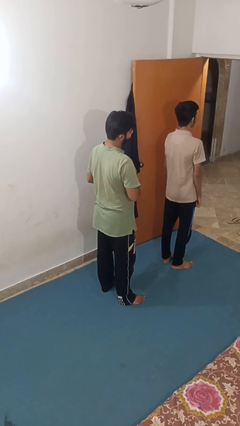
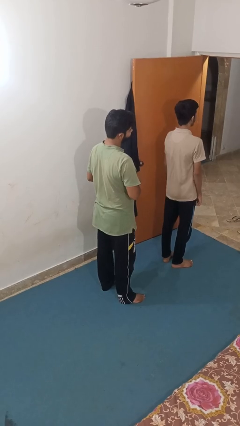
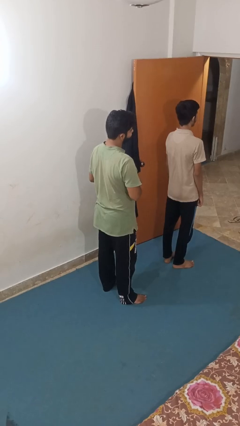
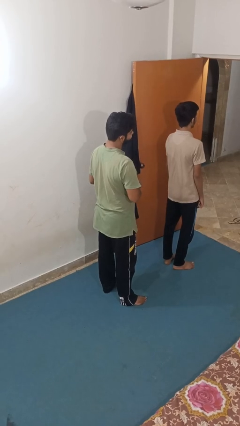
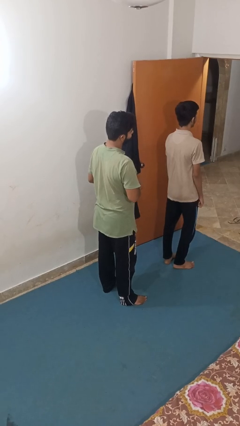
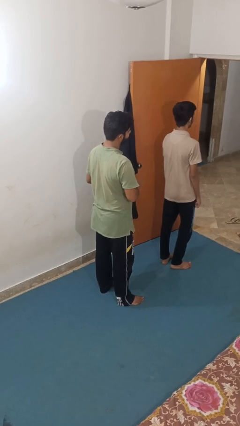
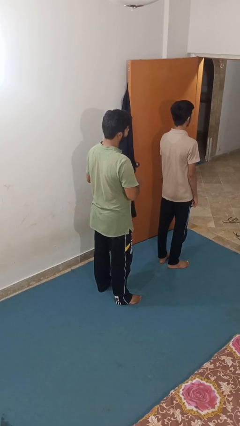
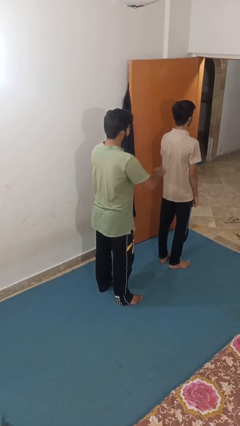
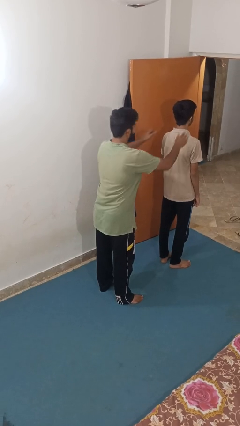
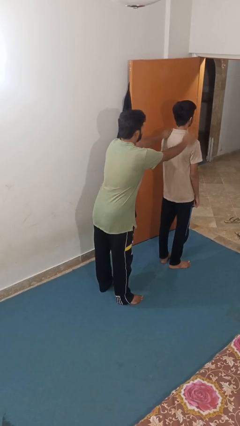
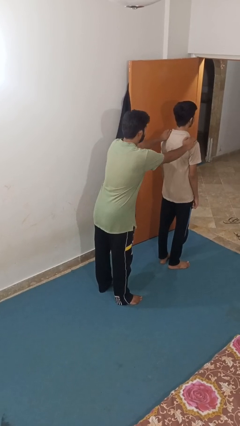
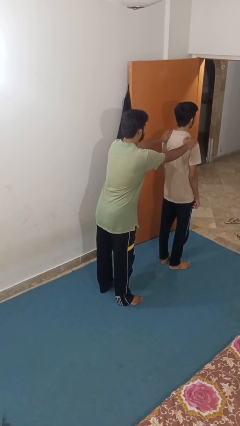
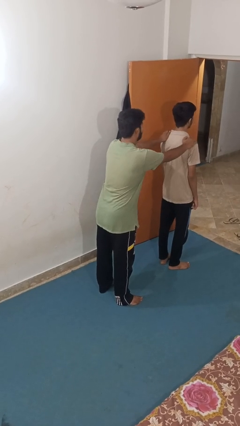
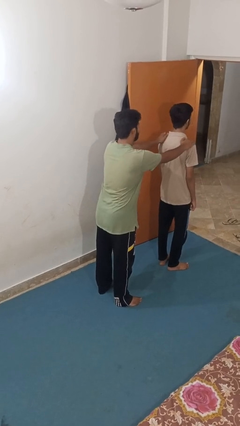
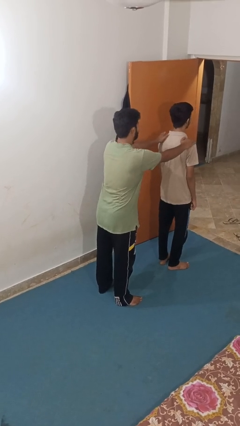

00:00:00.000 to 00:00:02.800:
person grabs person by shoulder

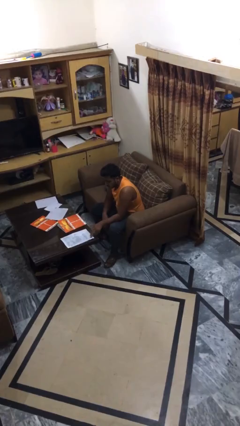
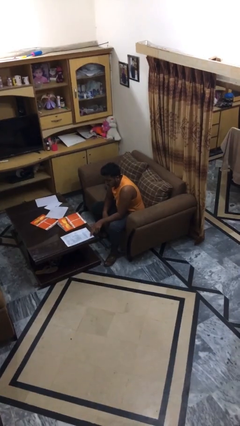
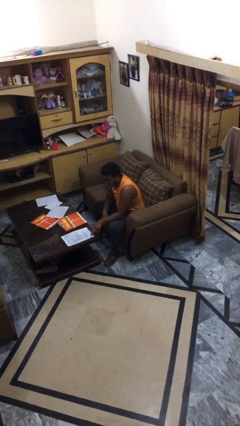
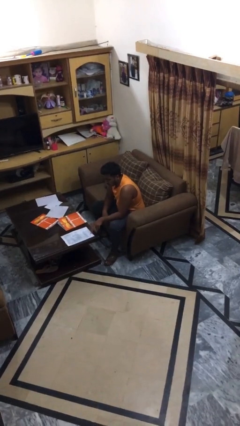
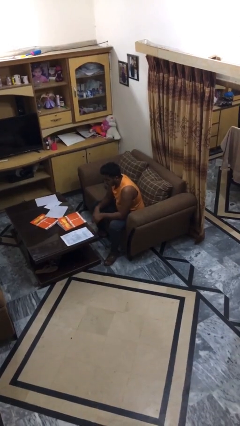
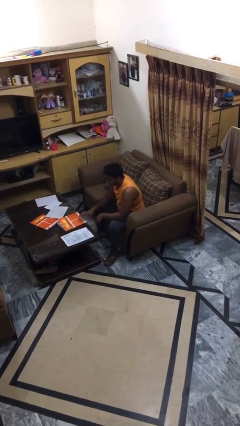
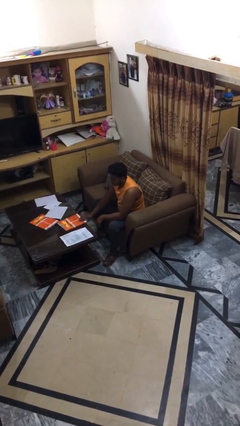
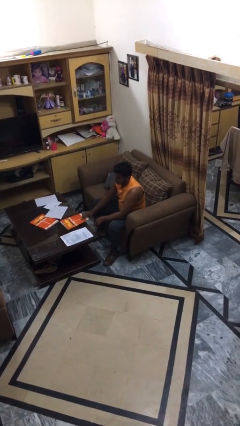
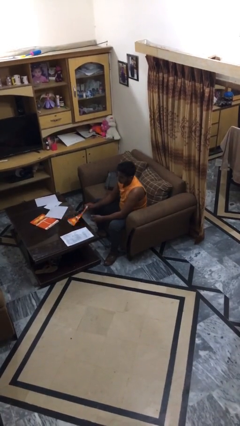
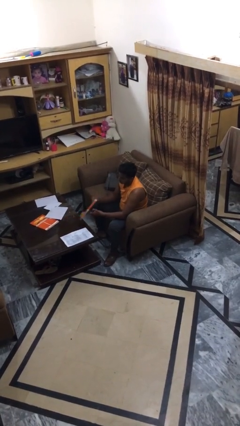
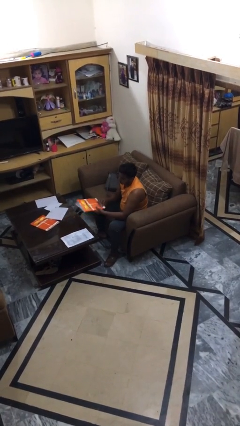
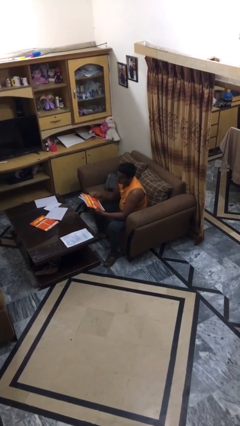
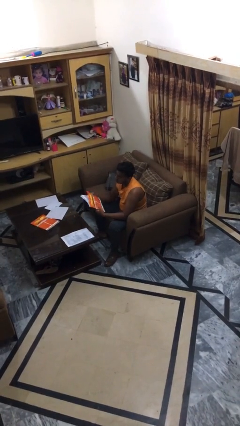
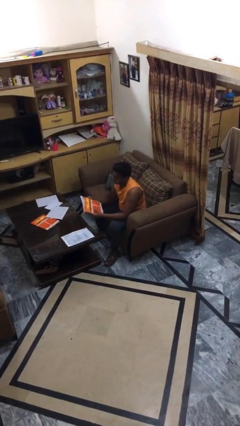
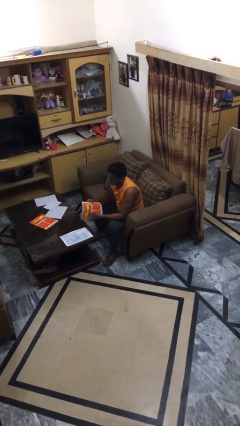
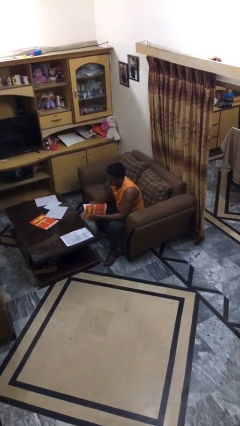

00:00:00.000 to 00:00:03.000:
person picks up object from table

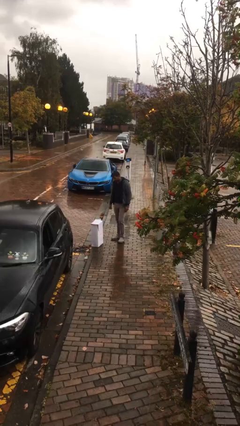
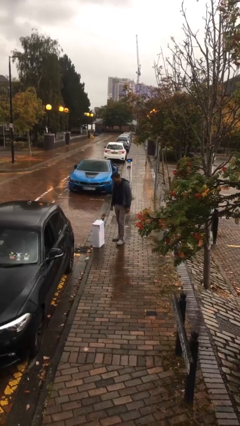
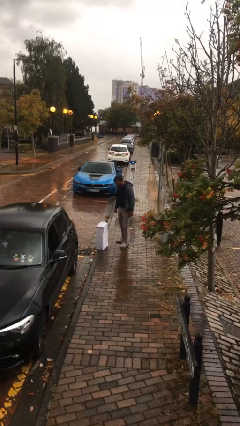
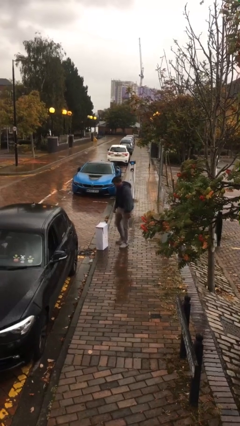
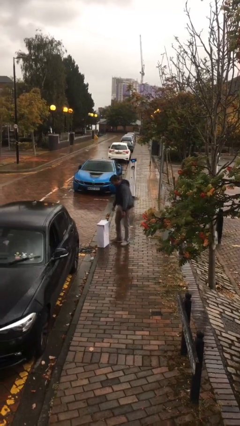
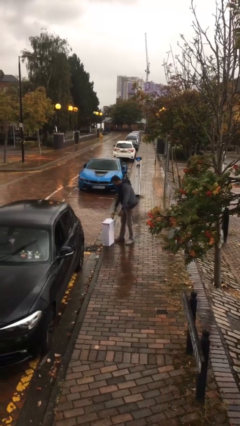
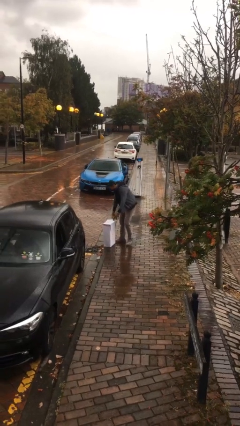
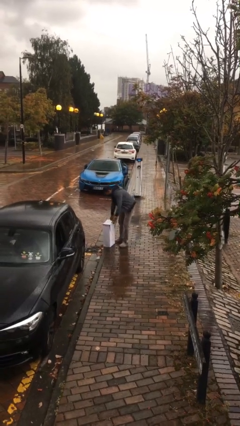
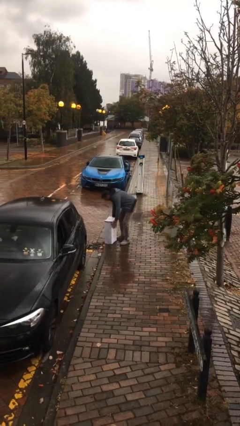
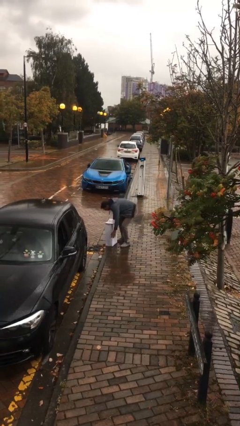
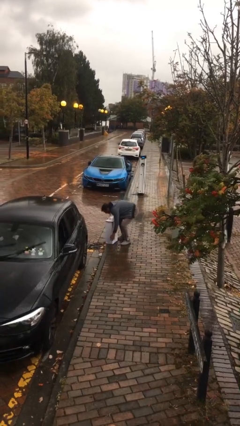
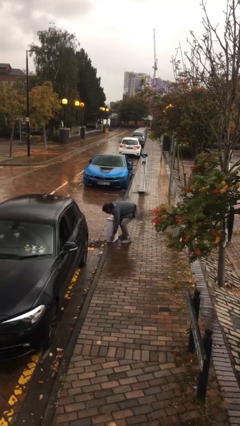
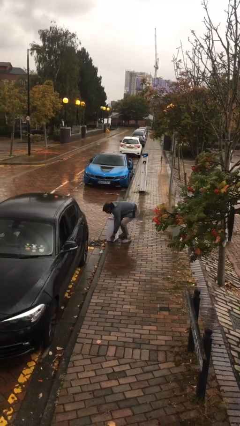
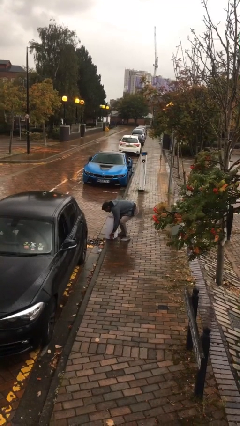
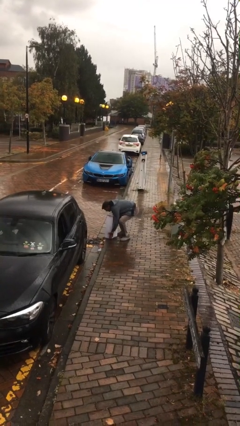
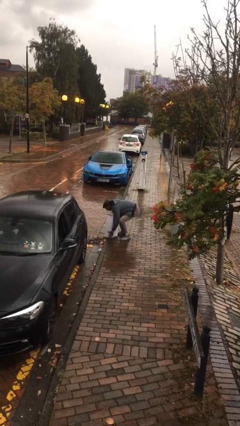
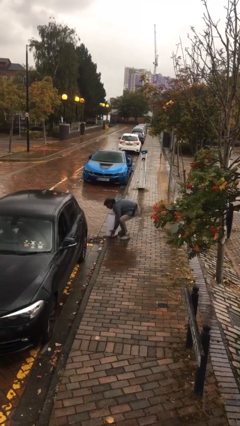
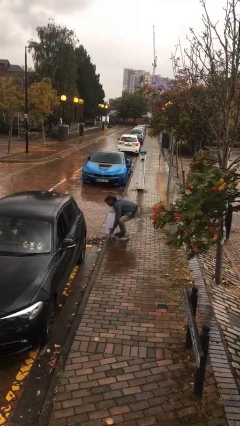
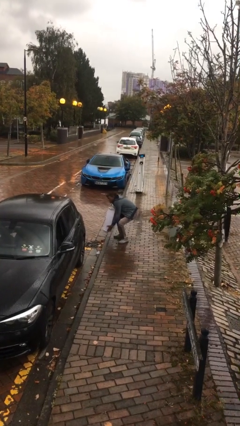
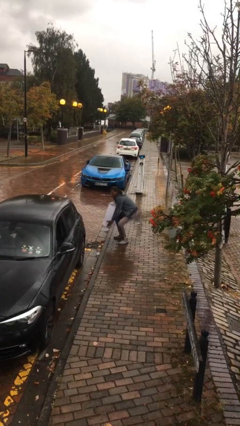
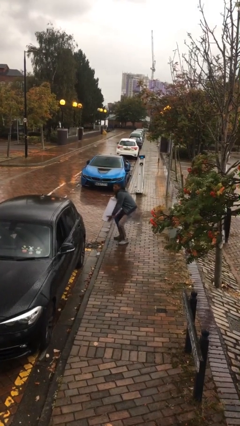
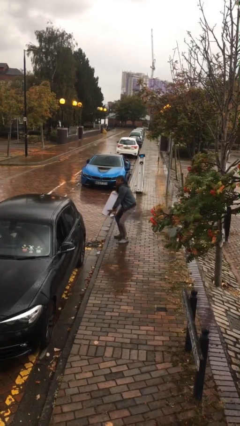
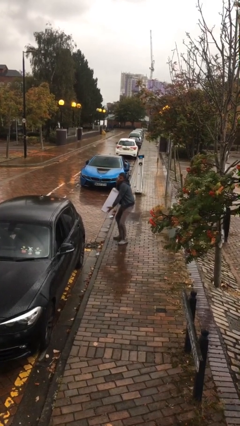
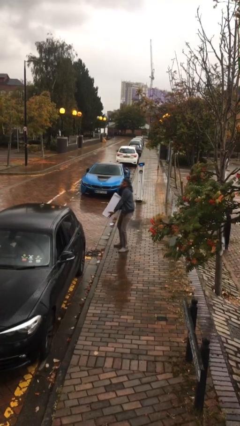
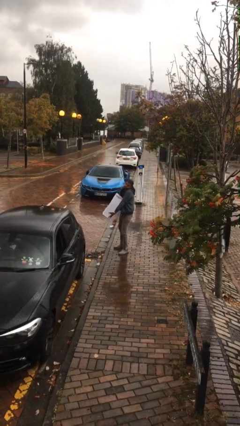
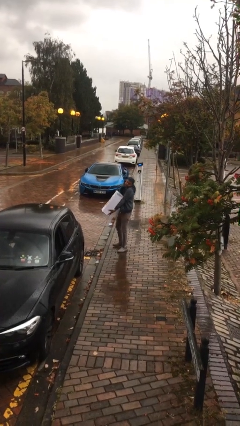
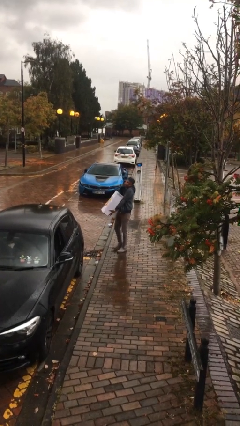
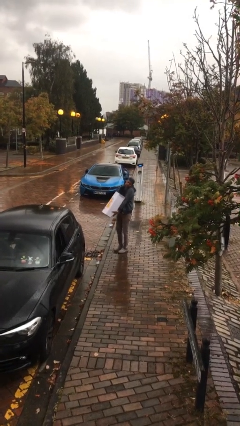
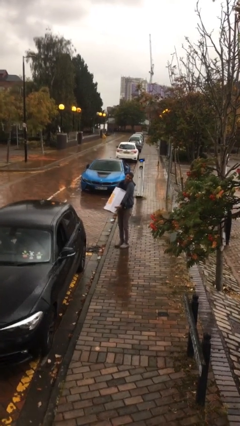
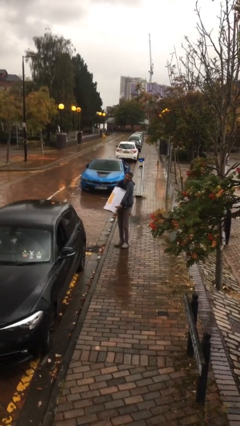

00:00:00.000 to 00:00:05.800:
person picks up object from floor

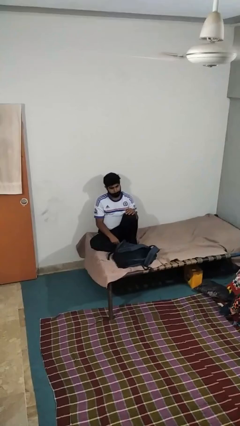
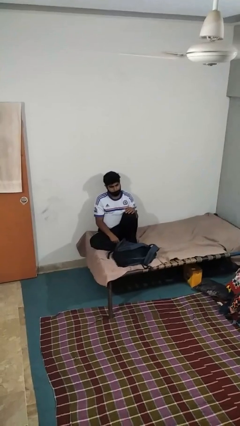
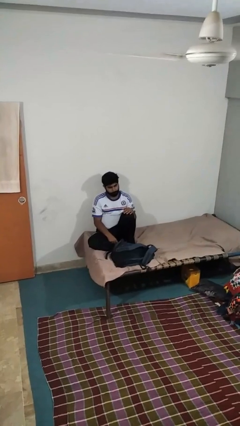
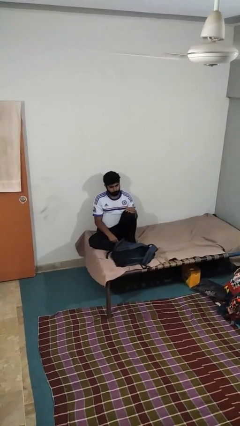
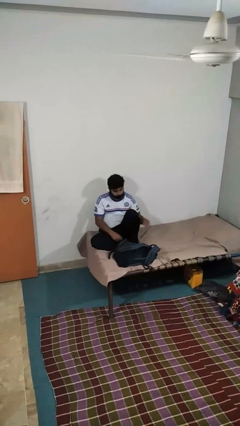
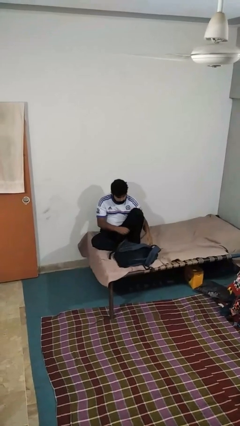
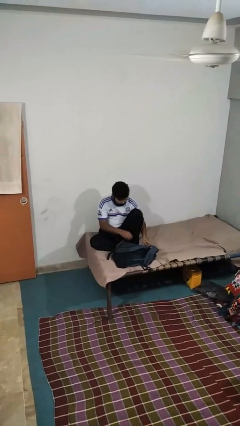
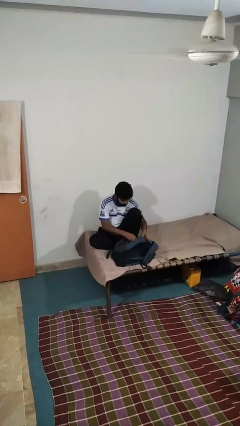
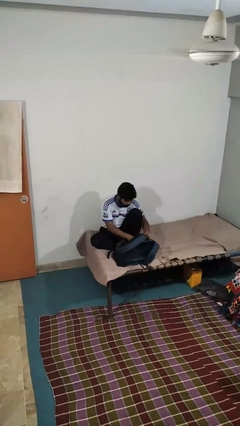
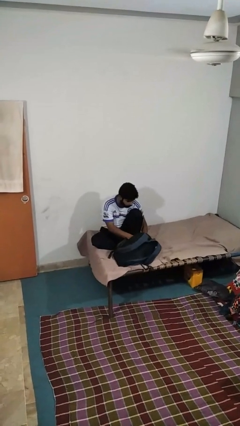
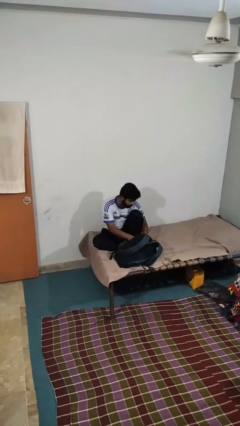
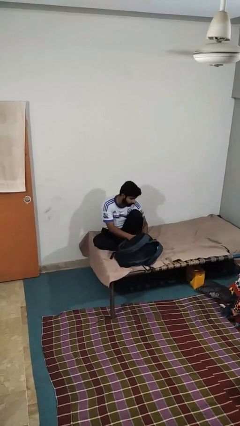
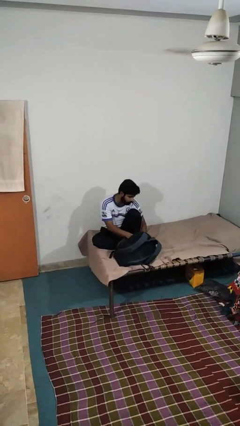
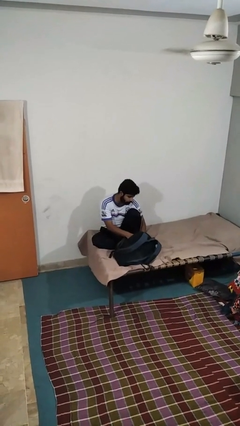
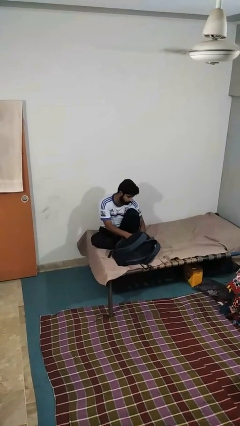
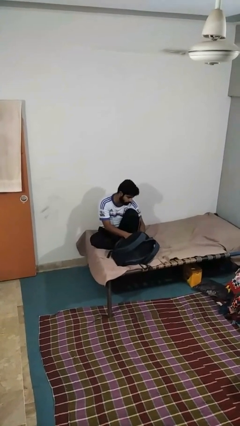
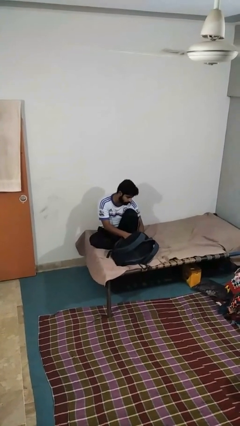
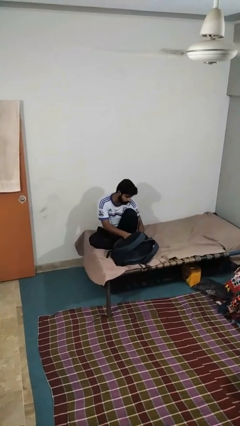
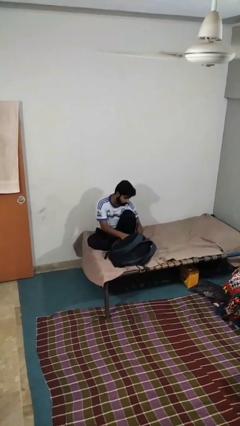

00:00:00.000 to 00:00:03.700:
person searches in backpack

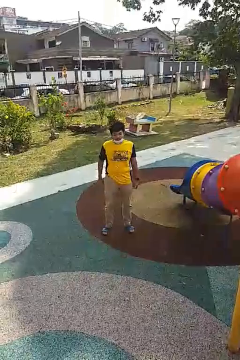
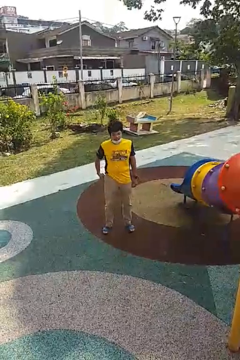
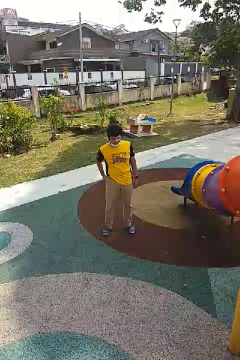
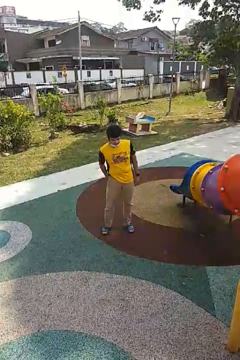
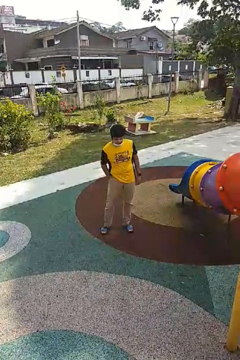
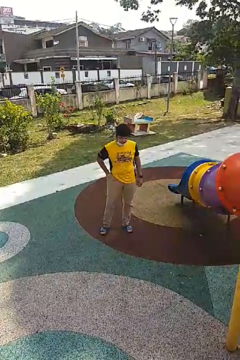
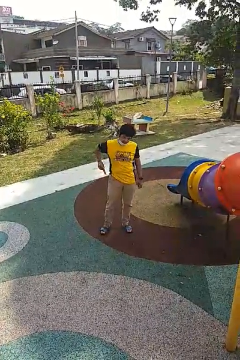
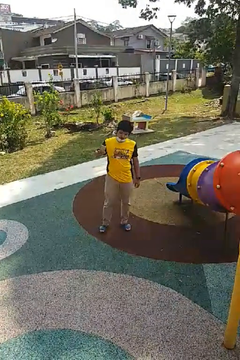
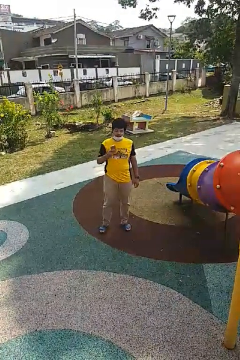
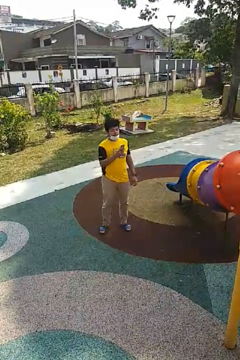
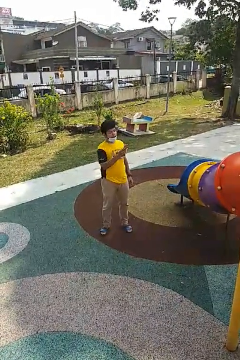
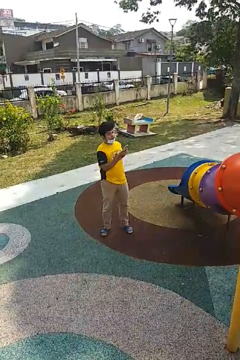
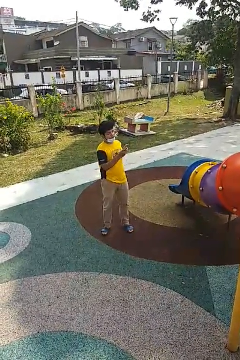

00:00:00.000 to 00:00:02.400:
person takes phone from pocket

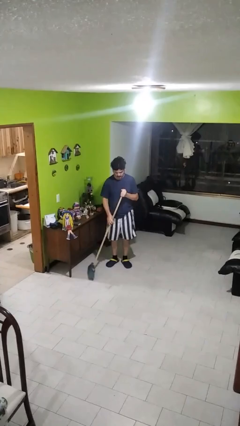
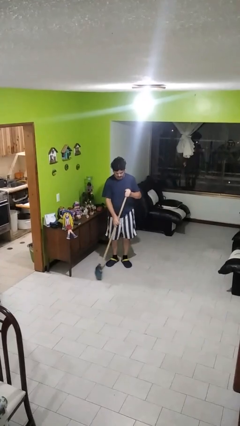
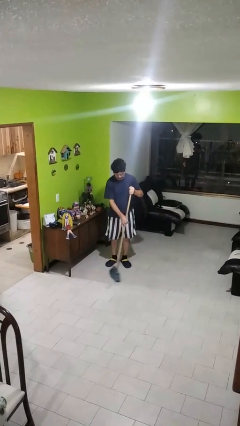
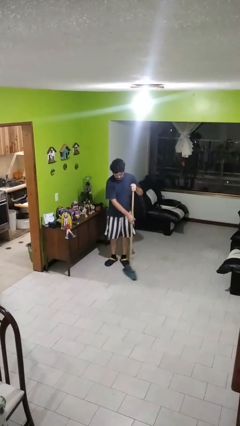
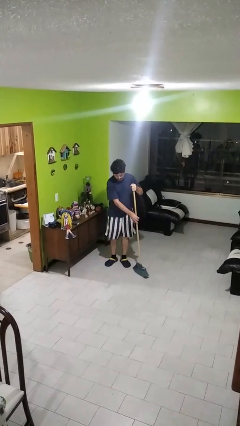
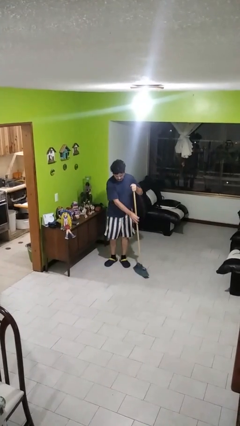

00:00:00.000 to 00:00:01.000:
person sweeps floor
